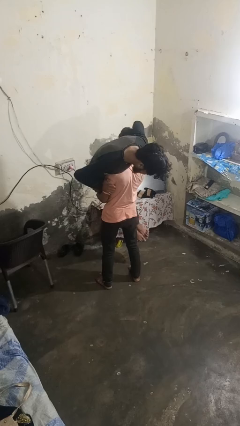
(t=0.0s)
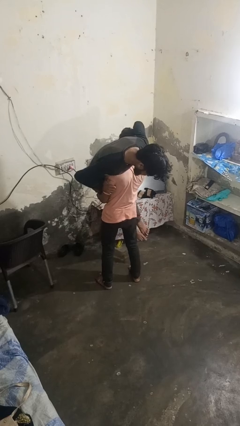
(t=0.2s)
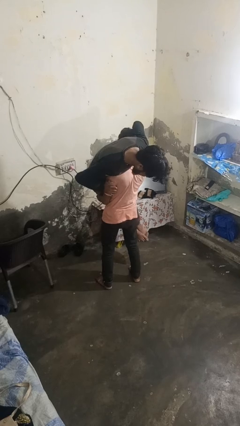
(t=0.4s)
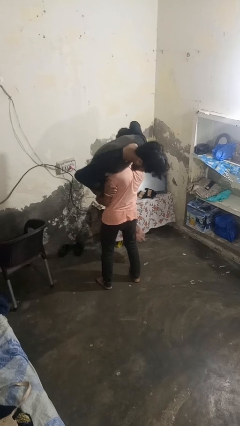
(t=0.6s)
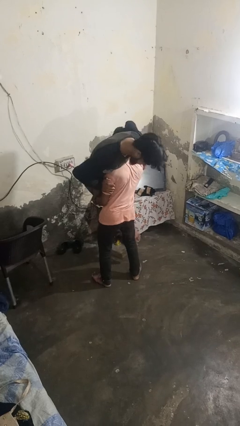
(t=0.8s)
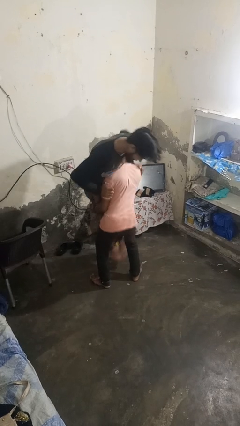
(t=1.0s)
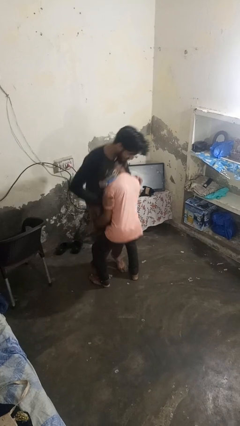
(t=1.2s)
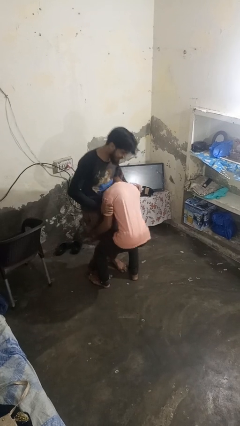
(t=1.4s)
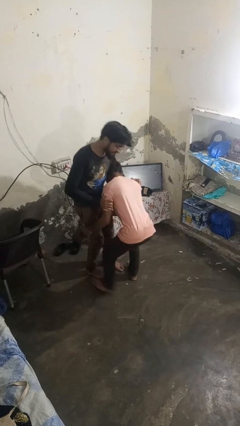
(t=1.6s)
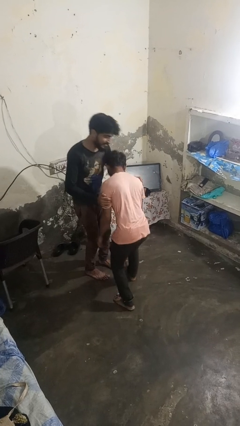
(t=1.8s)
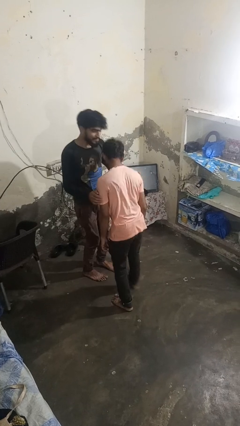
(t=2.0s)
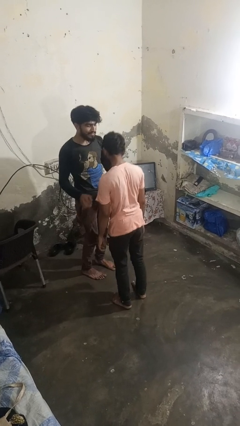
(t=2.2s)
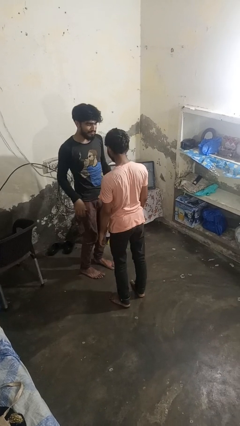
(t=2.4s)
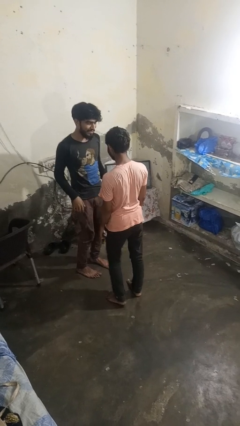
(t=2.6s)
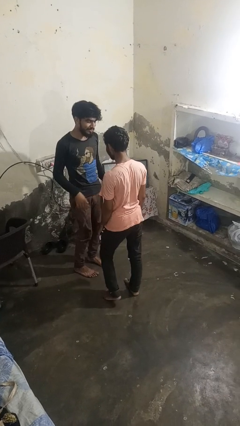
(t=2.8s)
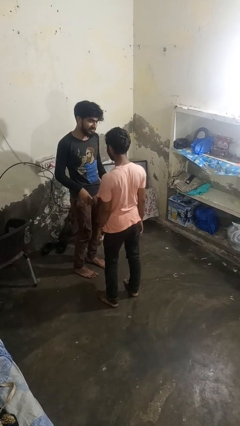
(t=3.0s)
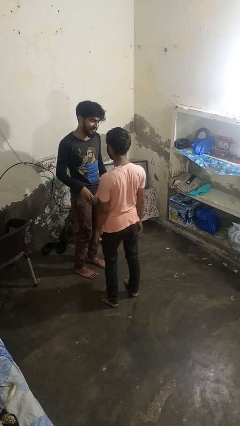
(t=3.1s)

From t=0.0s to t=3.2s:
person puts down person

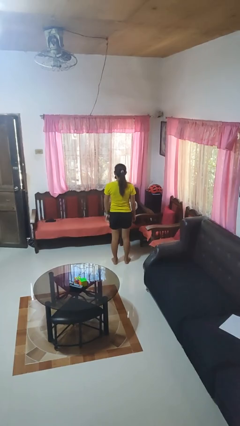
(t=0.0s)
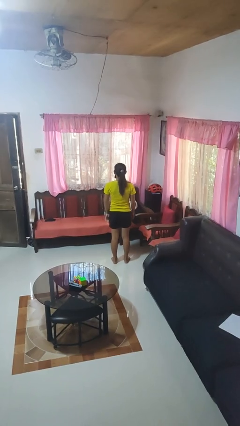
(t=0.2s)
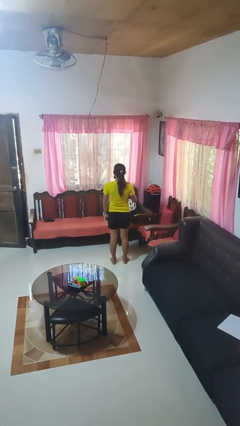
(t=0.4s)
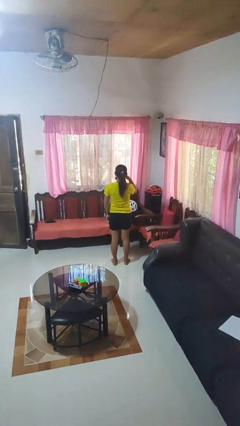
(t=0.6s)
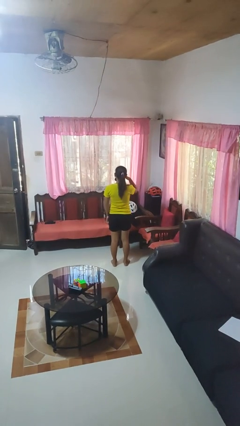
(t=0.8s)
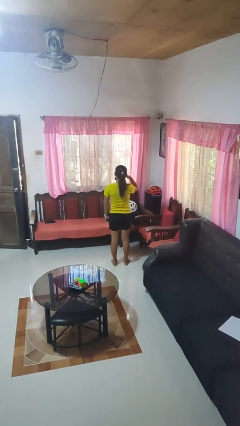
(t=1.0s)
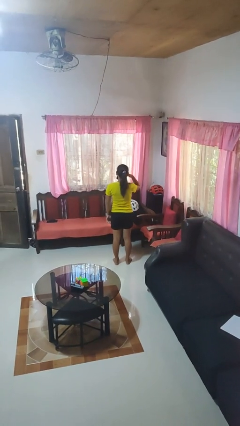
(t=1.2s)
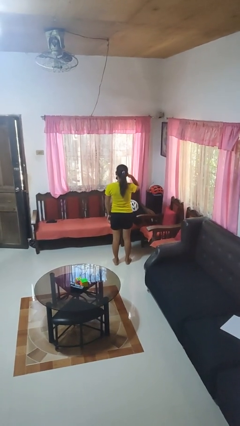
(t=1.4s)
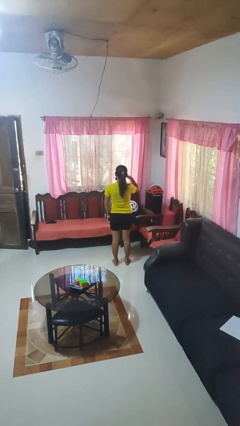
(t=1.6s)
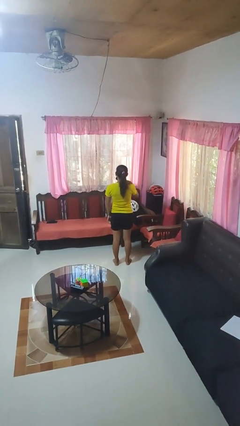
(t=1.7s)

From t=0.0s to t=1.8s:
person gestures call me

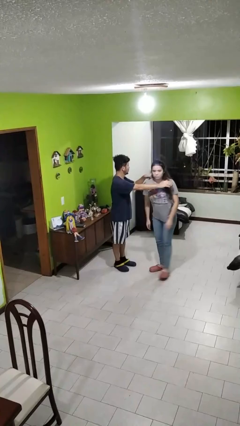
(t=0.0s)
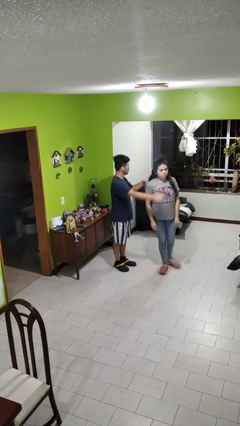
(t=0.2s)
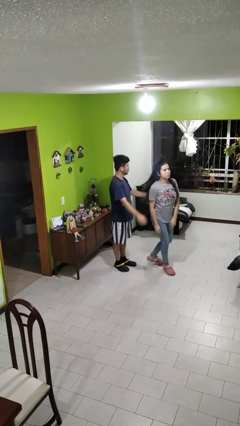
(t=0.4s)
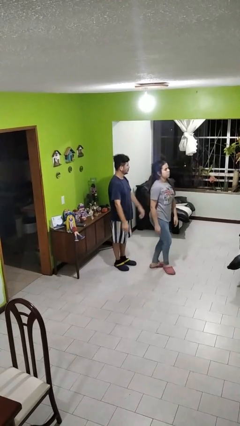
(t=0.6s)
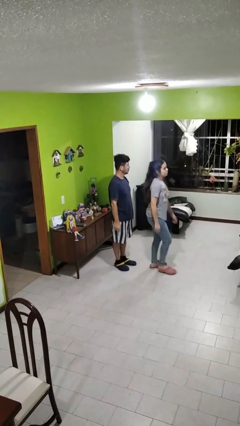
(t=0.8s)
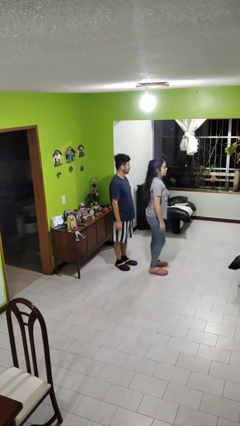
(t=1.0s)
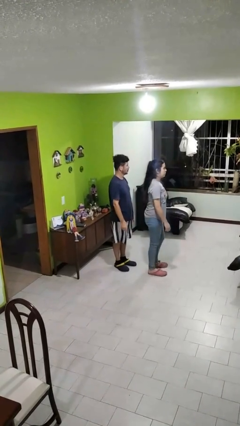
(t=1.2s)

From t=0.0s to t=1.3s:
person spins person around

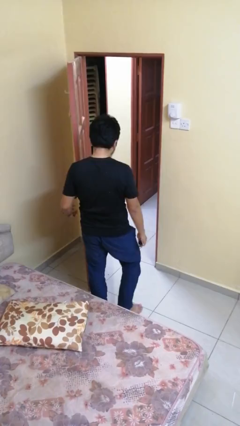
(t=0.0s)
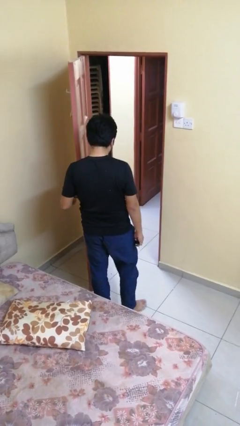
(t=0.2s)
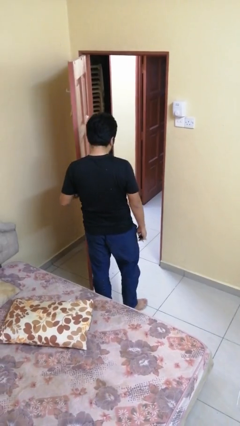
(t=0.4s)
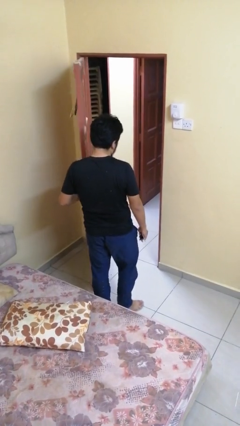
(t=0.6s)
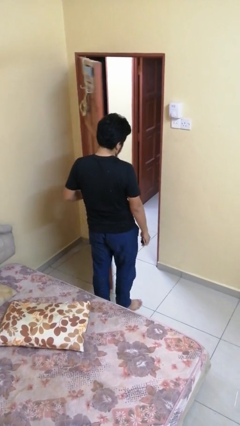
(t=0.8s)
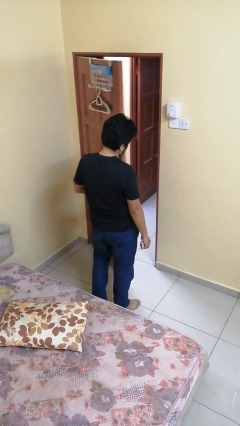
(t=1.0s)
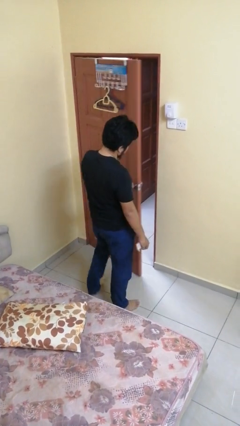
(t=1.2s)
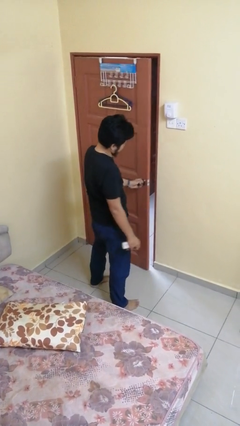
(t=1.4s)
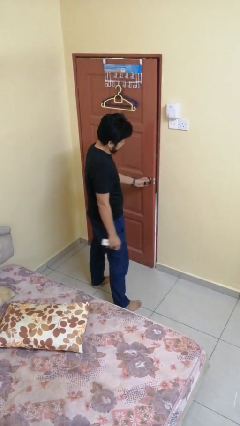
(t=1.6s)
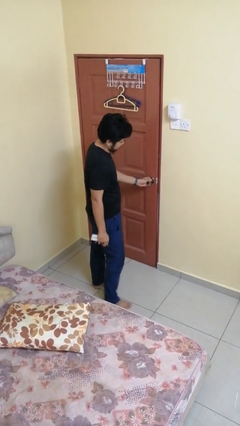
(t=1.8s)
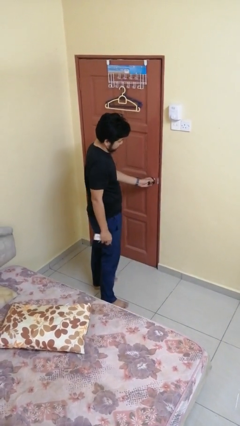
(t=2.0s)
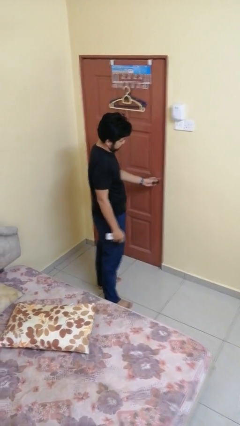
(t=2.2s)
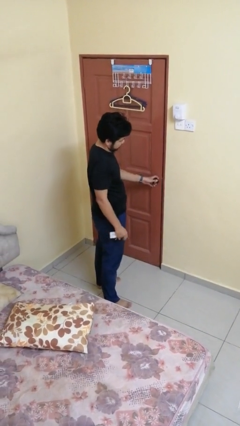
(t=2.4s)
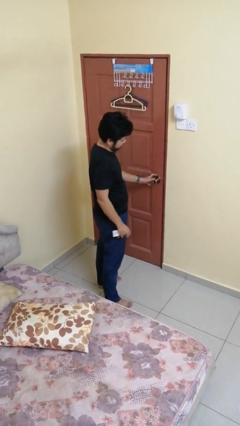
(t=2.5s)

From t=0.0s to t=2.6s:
person closes facility door

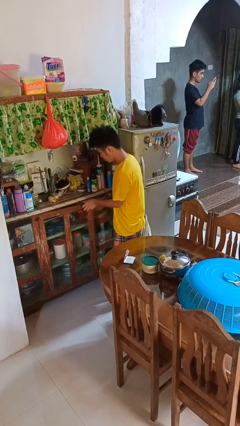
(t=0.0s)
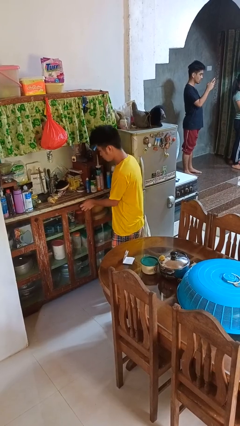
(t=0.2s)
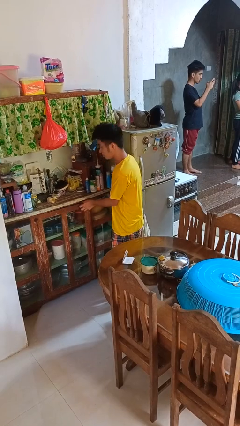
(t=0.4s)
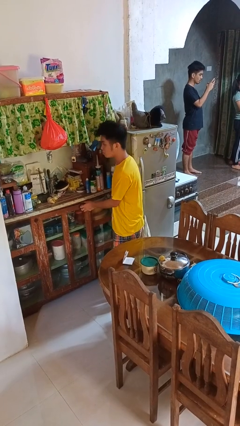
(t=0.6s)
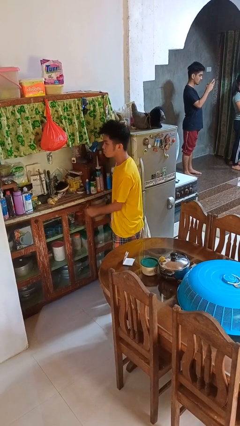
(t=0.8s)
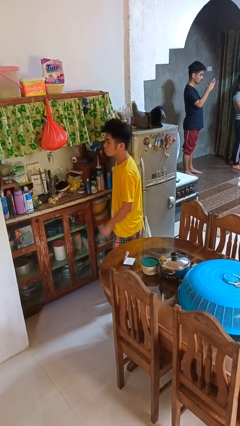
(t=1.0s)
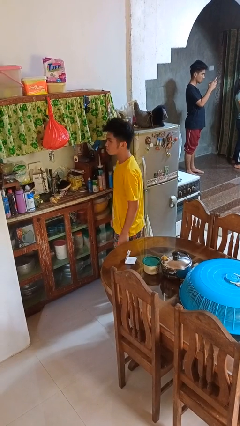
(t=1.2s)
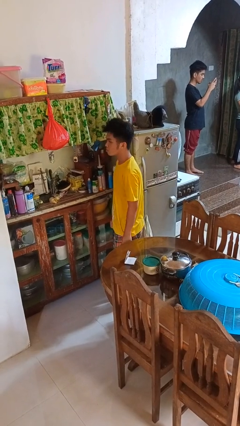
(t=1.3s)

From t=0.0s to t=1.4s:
person closes cabinet

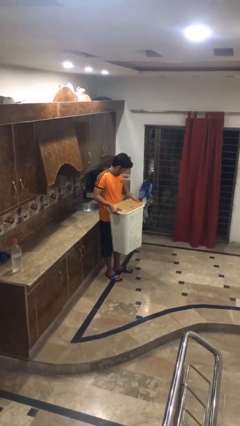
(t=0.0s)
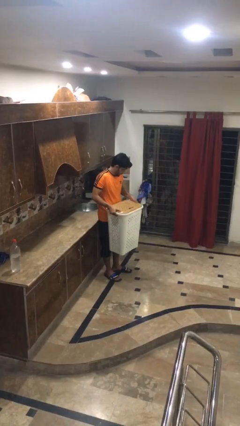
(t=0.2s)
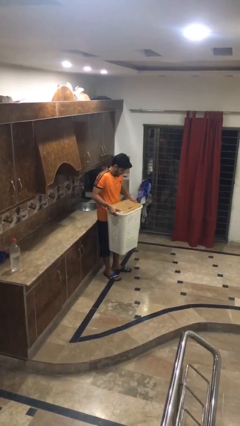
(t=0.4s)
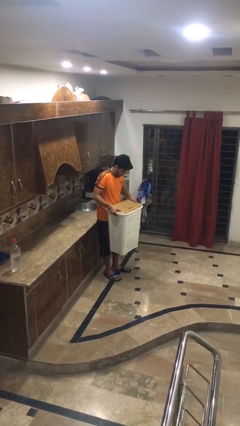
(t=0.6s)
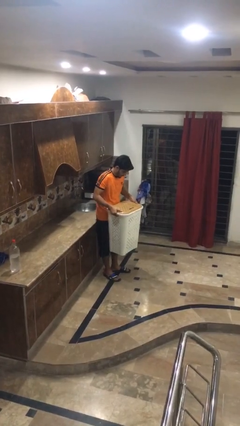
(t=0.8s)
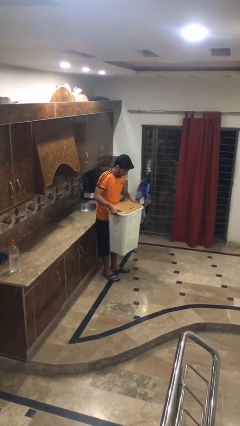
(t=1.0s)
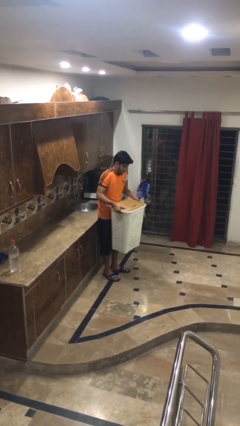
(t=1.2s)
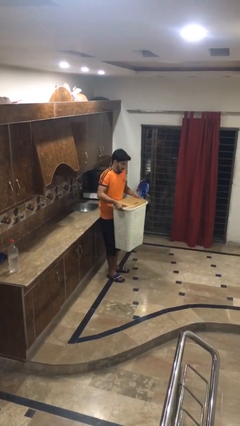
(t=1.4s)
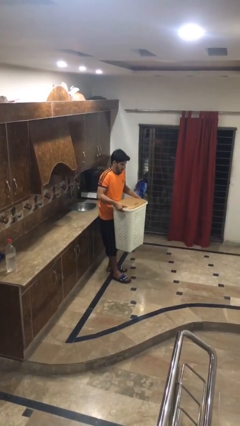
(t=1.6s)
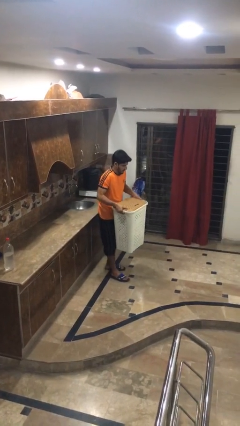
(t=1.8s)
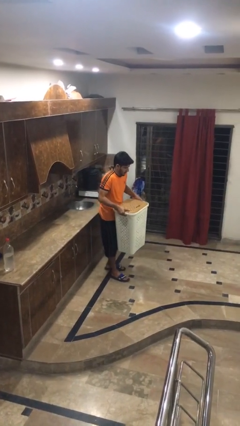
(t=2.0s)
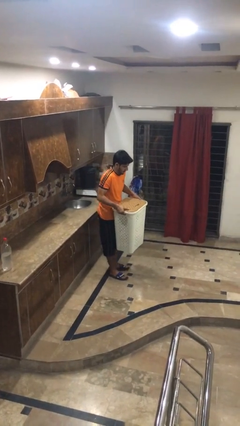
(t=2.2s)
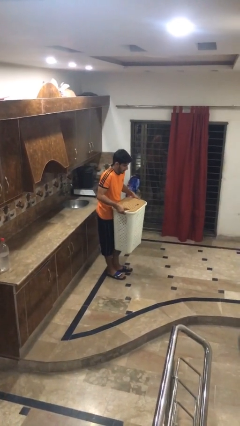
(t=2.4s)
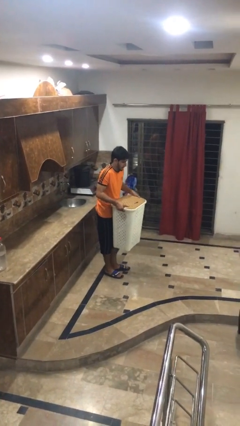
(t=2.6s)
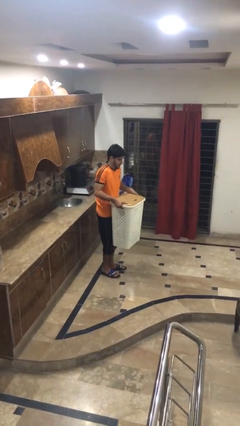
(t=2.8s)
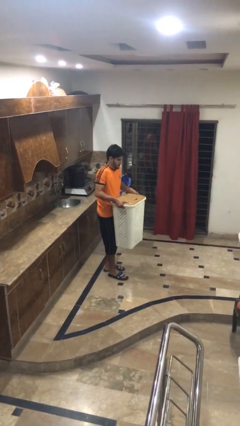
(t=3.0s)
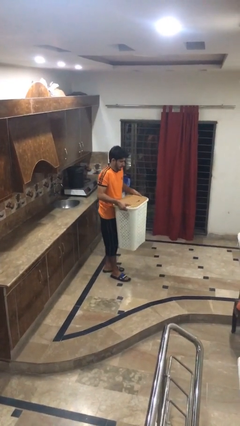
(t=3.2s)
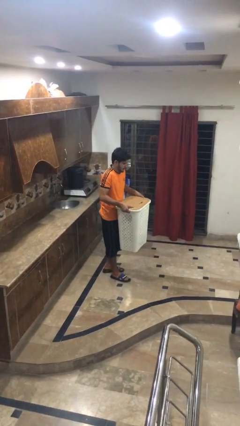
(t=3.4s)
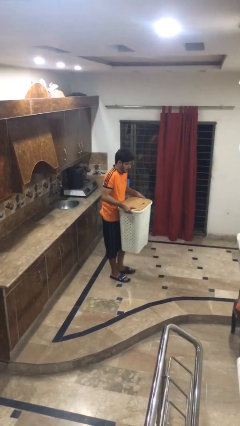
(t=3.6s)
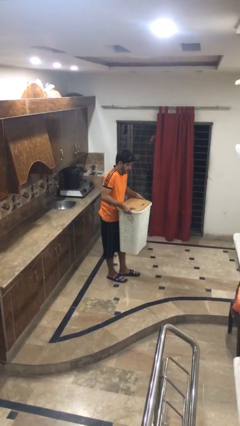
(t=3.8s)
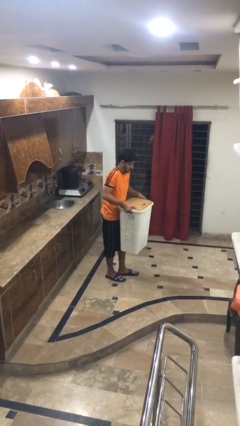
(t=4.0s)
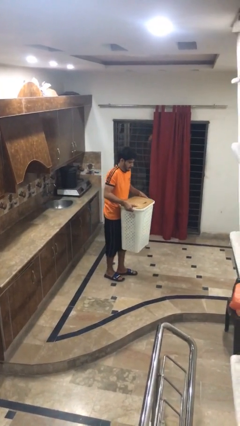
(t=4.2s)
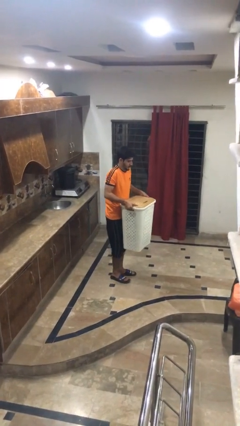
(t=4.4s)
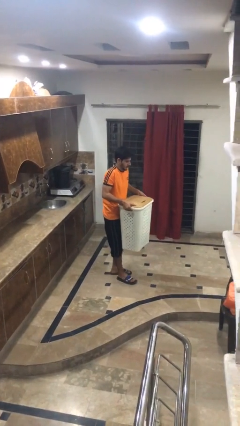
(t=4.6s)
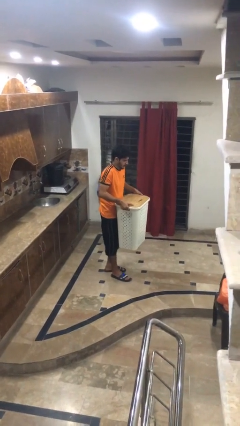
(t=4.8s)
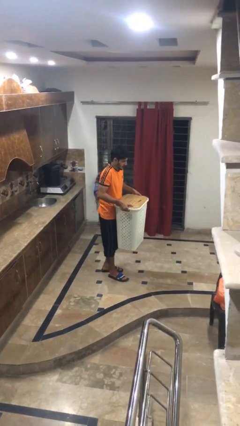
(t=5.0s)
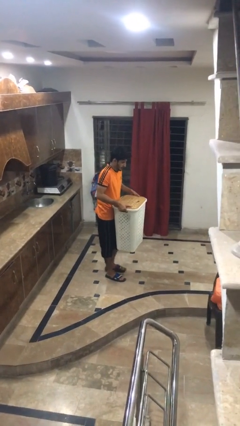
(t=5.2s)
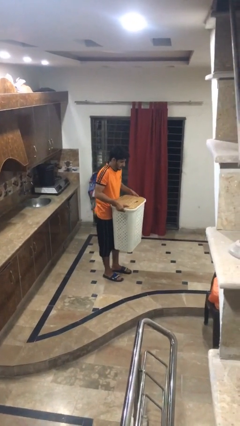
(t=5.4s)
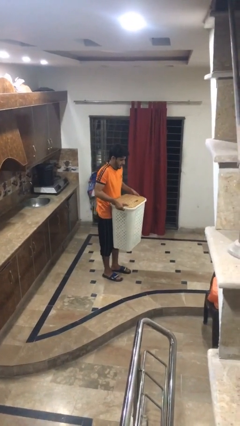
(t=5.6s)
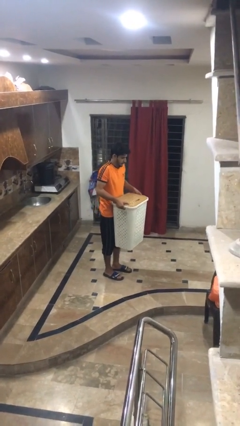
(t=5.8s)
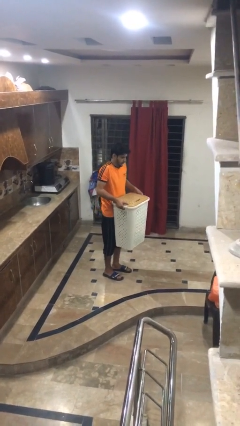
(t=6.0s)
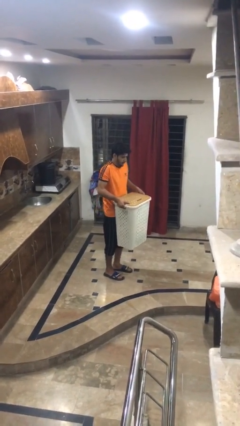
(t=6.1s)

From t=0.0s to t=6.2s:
person carries laundry basket

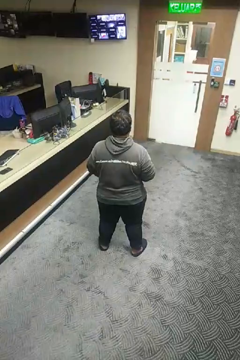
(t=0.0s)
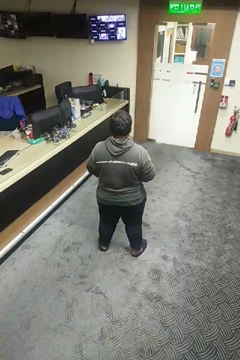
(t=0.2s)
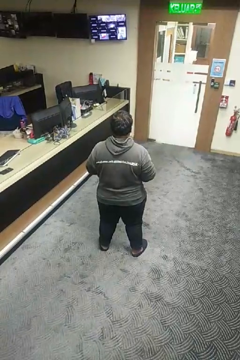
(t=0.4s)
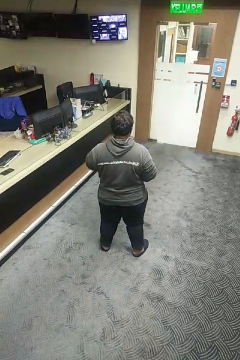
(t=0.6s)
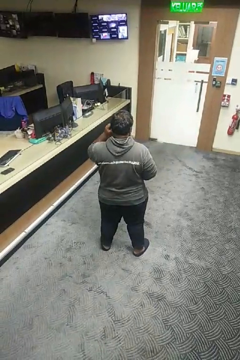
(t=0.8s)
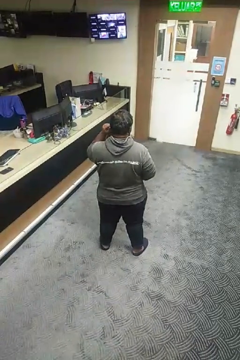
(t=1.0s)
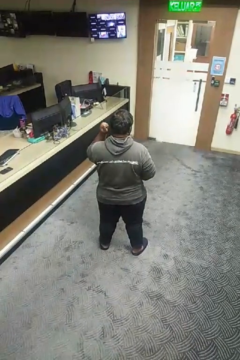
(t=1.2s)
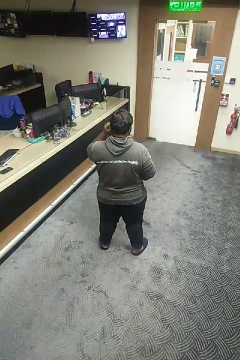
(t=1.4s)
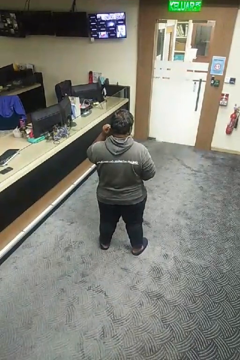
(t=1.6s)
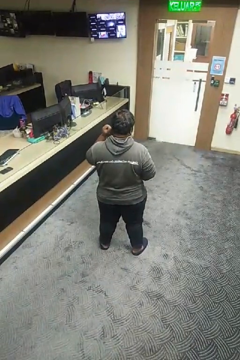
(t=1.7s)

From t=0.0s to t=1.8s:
person touches earlobe
